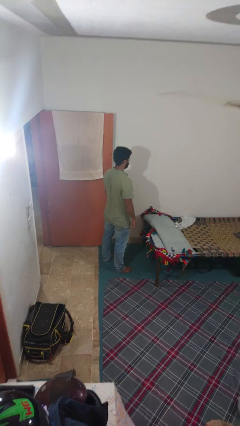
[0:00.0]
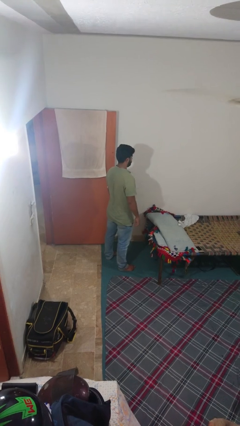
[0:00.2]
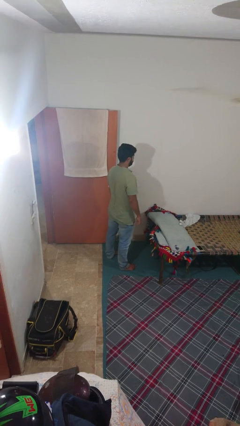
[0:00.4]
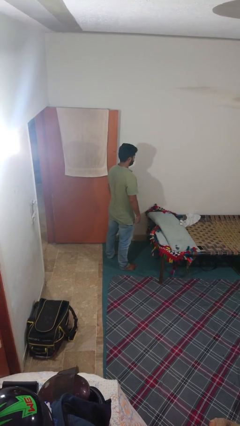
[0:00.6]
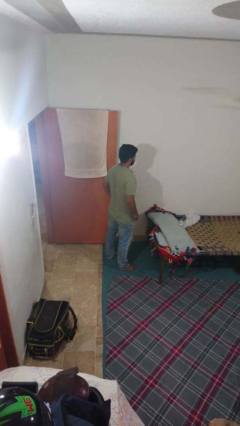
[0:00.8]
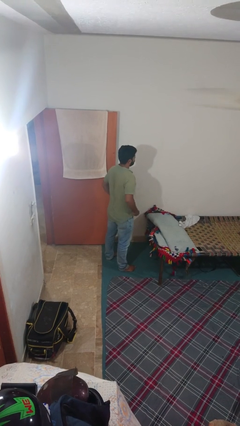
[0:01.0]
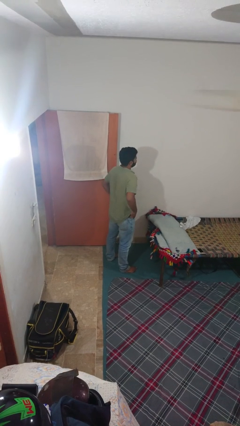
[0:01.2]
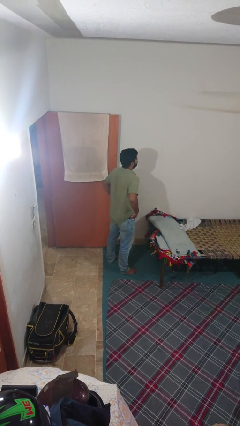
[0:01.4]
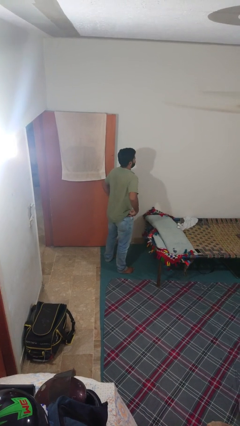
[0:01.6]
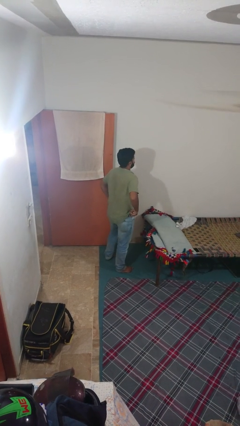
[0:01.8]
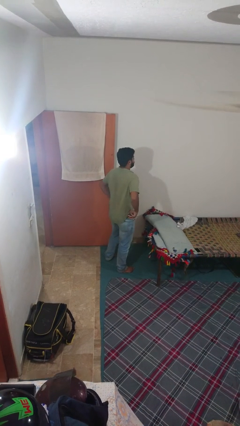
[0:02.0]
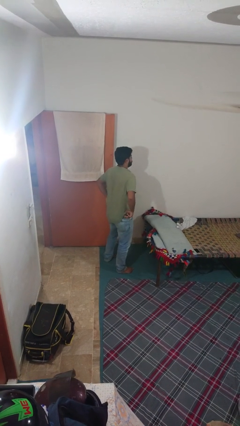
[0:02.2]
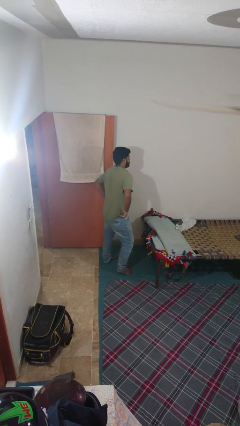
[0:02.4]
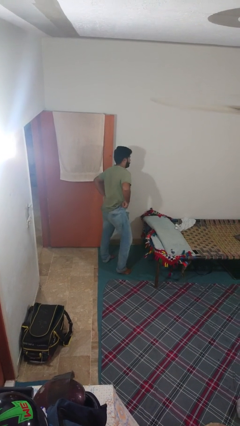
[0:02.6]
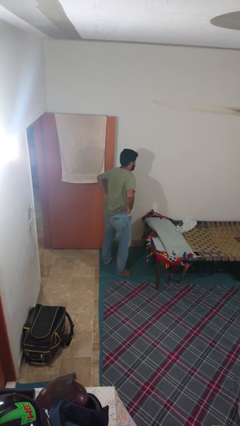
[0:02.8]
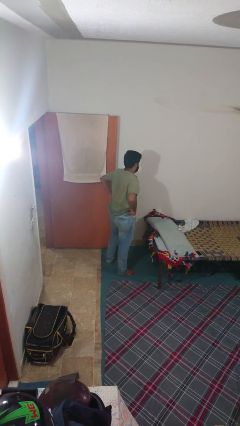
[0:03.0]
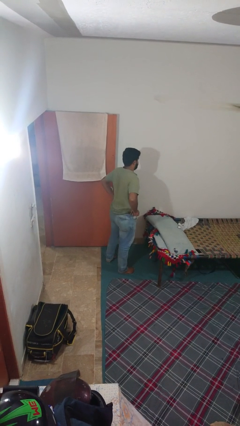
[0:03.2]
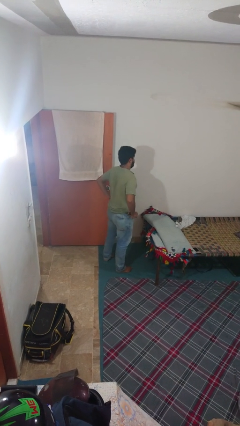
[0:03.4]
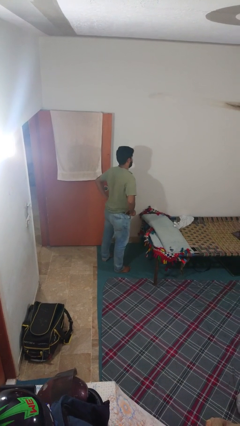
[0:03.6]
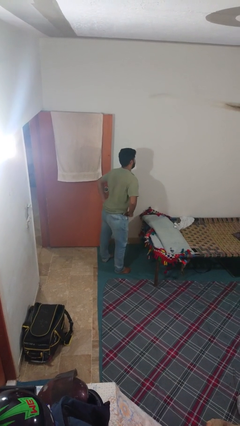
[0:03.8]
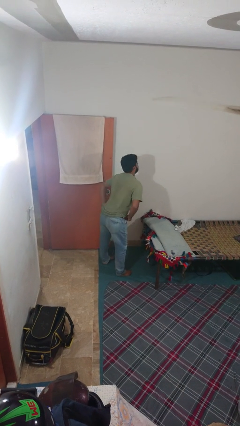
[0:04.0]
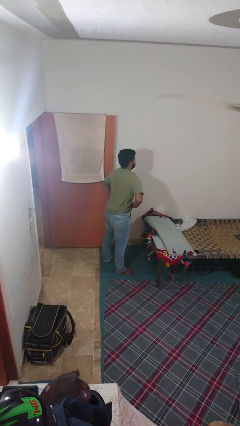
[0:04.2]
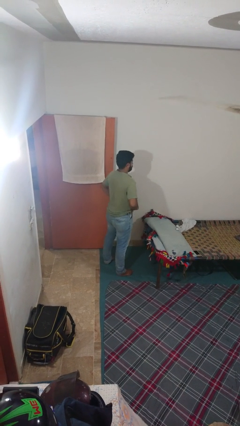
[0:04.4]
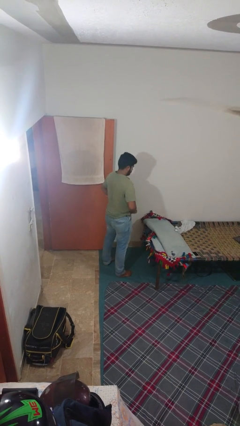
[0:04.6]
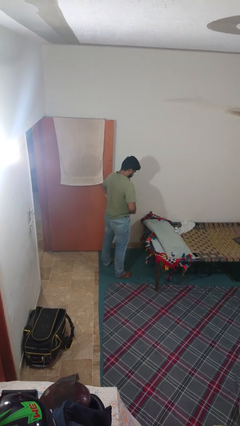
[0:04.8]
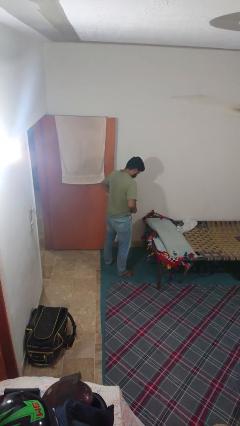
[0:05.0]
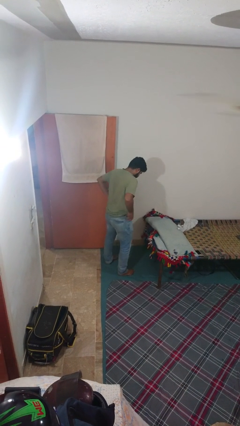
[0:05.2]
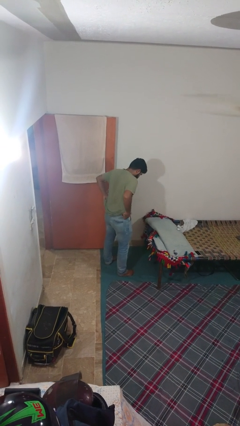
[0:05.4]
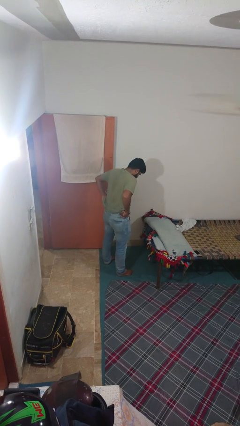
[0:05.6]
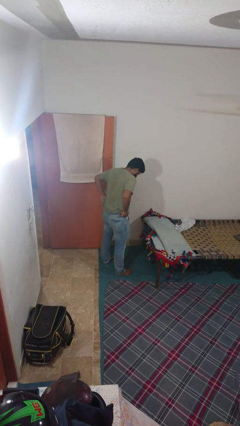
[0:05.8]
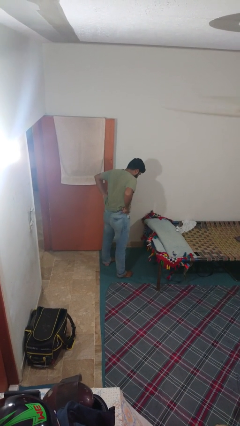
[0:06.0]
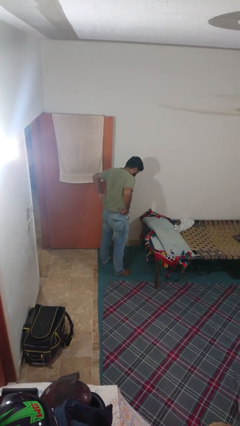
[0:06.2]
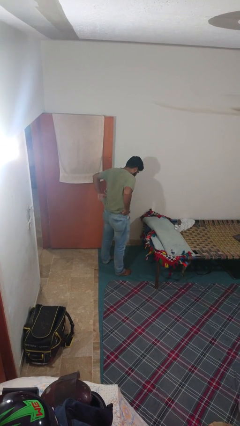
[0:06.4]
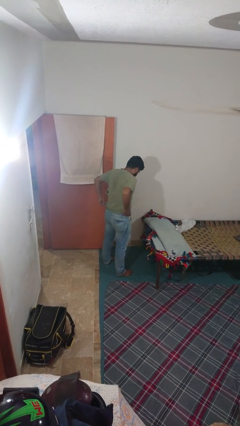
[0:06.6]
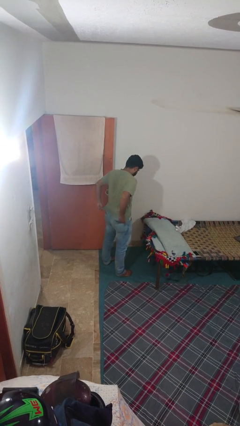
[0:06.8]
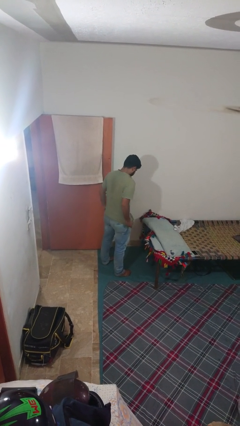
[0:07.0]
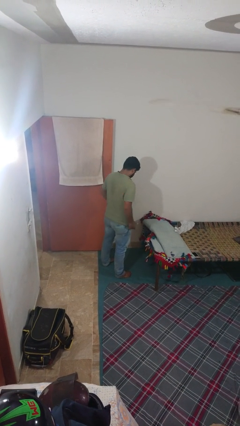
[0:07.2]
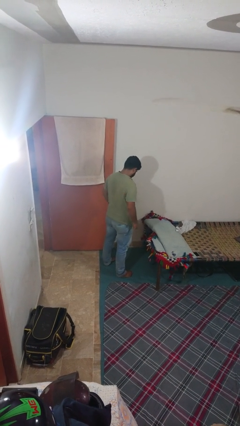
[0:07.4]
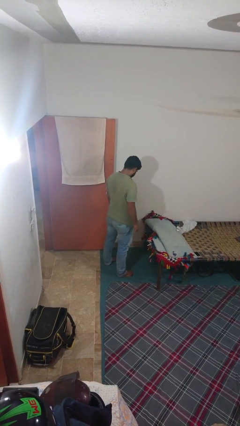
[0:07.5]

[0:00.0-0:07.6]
person hikes up pants

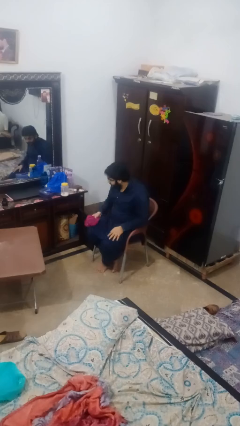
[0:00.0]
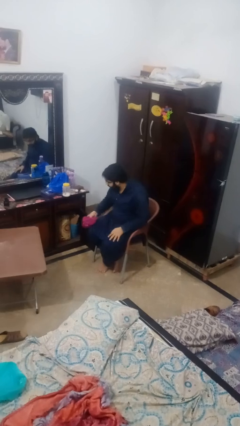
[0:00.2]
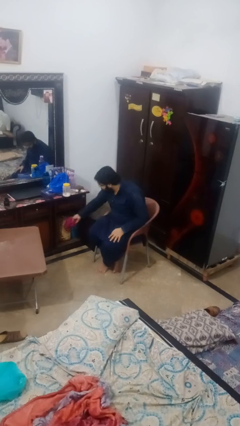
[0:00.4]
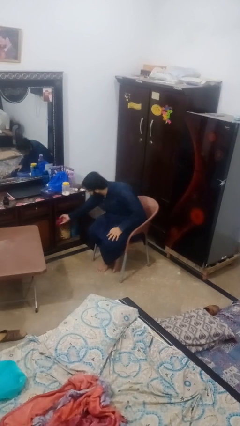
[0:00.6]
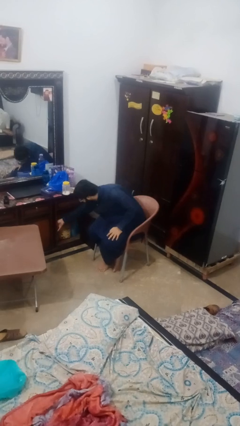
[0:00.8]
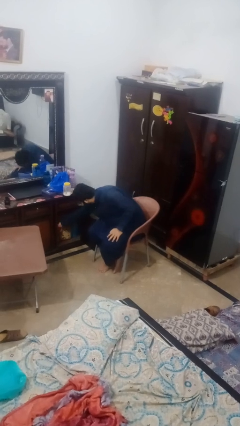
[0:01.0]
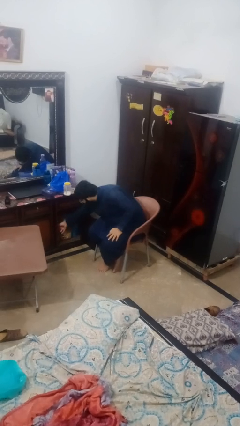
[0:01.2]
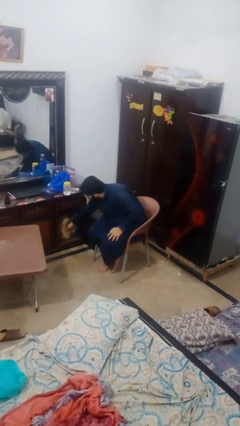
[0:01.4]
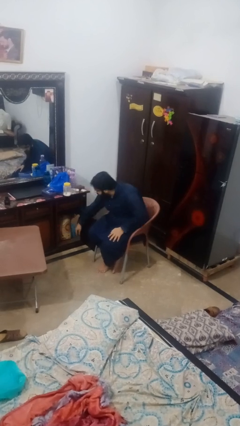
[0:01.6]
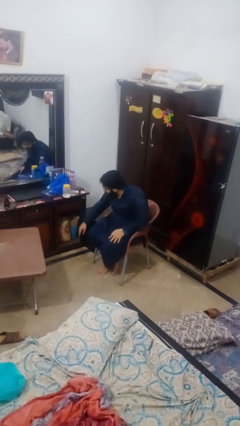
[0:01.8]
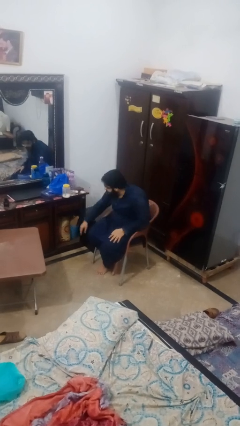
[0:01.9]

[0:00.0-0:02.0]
person puts clothes into dresser

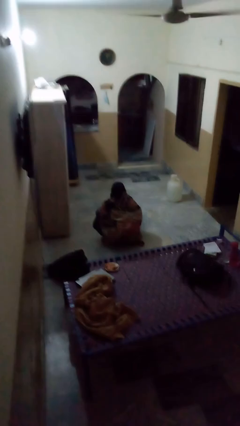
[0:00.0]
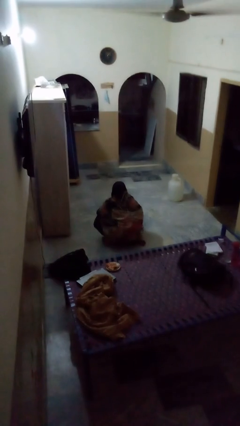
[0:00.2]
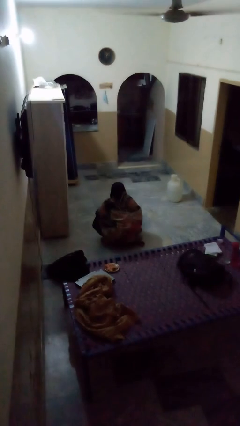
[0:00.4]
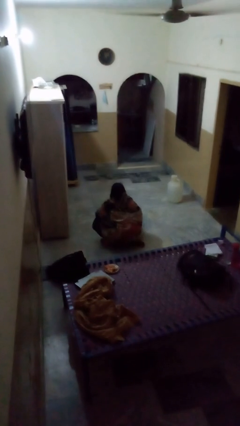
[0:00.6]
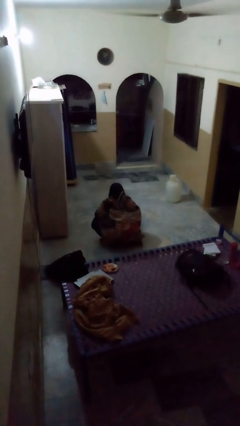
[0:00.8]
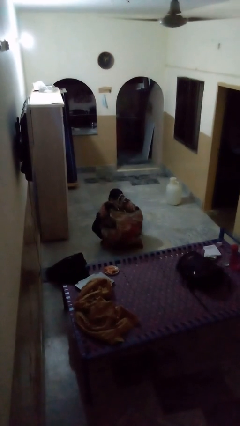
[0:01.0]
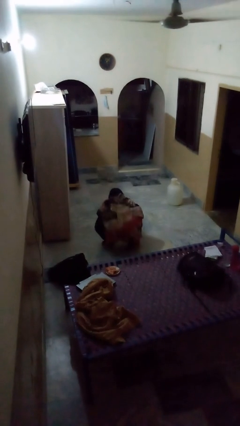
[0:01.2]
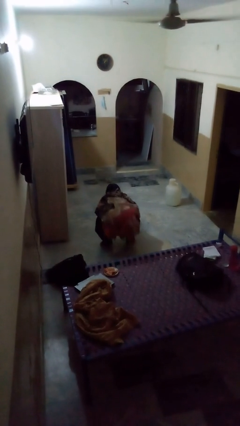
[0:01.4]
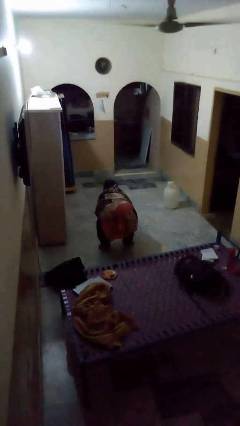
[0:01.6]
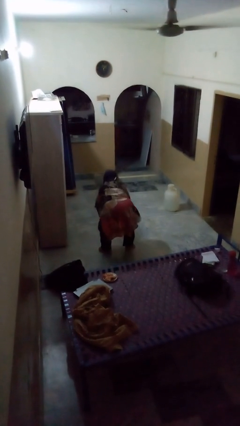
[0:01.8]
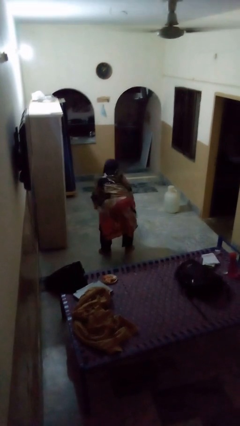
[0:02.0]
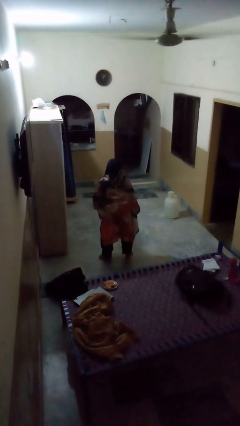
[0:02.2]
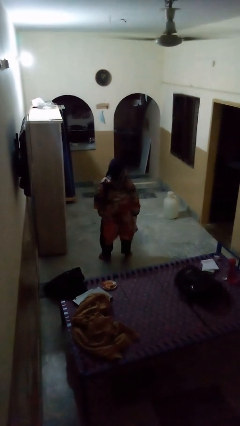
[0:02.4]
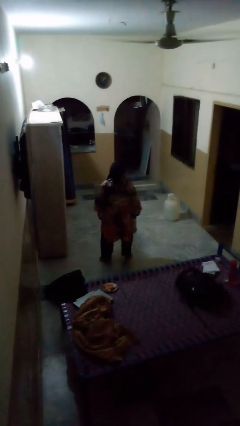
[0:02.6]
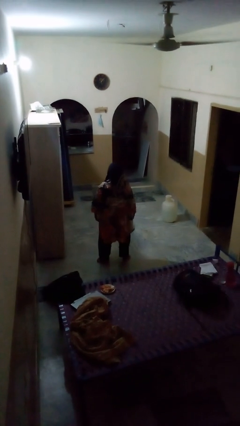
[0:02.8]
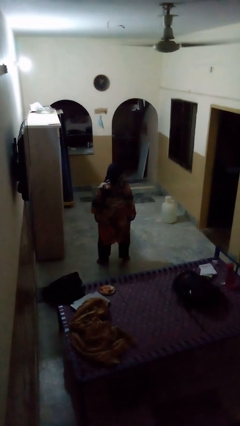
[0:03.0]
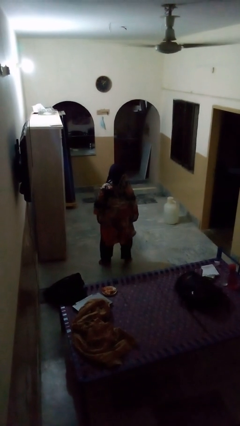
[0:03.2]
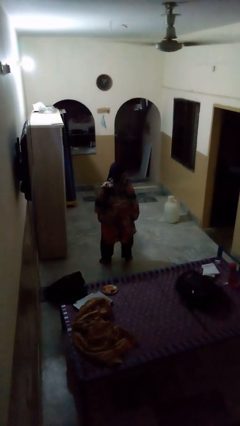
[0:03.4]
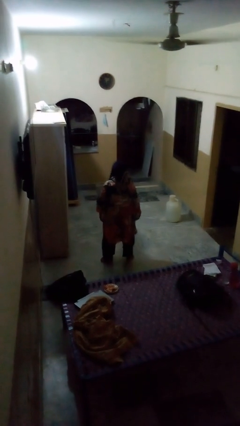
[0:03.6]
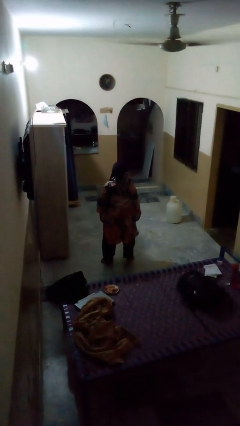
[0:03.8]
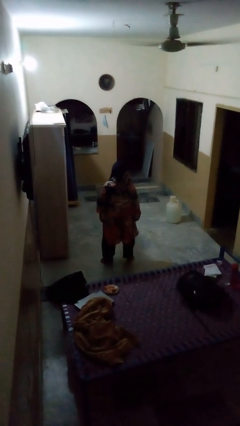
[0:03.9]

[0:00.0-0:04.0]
person stands up

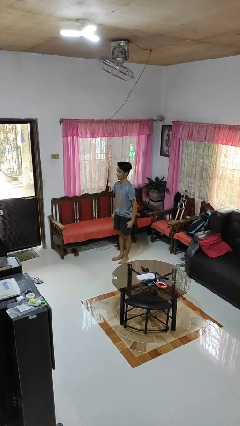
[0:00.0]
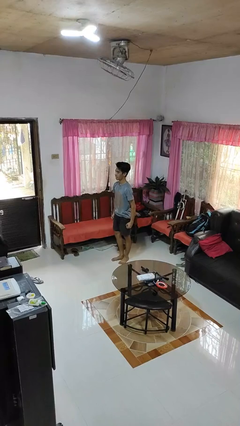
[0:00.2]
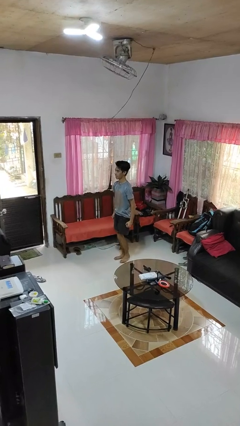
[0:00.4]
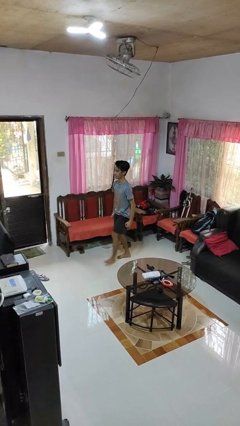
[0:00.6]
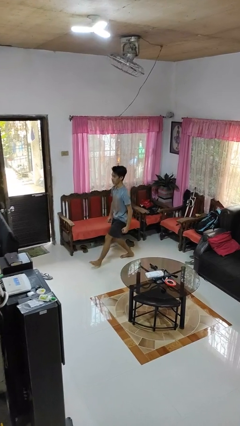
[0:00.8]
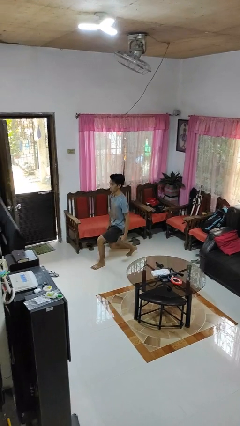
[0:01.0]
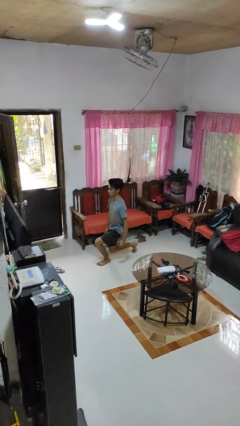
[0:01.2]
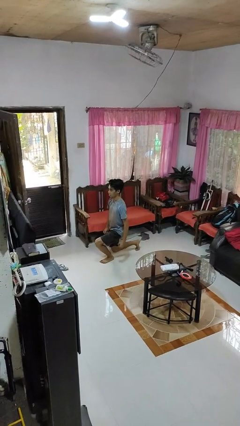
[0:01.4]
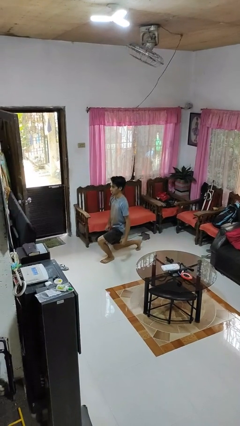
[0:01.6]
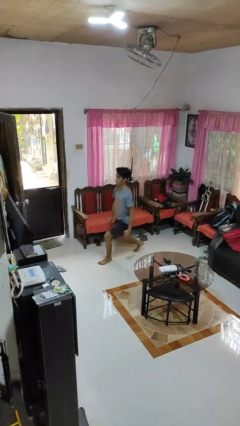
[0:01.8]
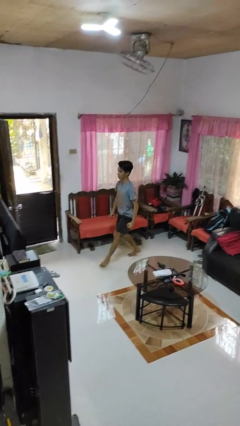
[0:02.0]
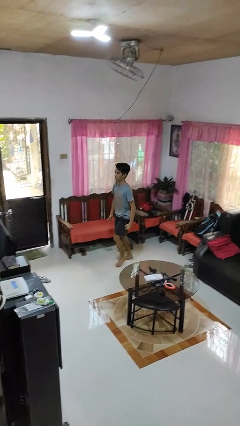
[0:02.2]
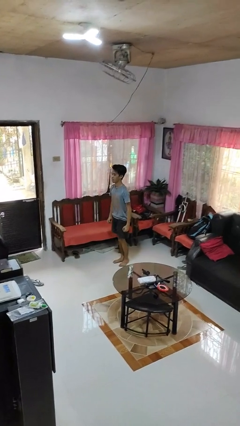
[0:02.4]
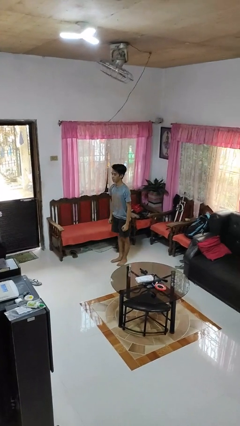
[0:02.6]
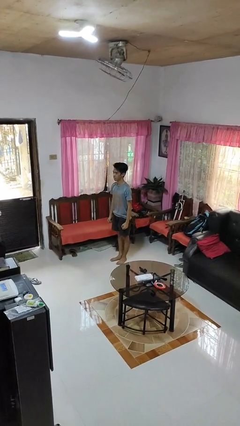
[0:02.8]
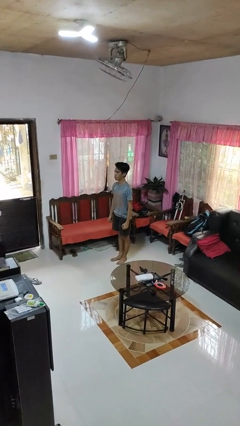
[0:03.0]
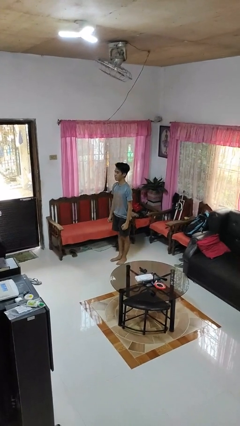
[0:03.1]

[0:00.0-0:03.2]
person exercises with lunges

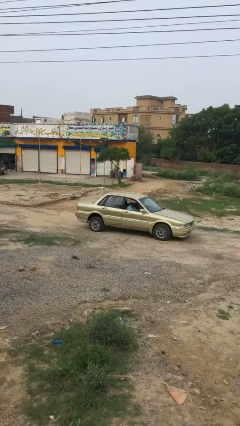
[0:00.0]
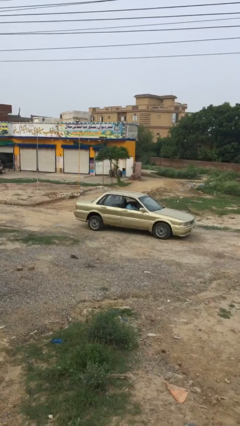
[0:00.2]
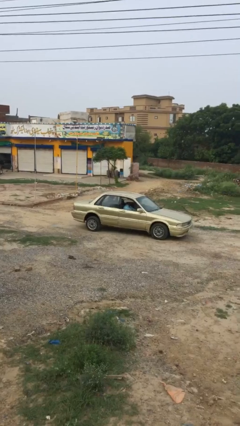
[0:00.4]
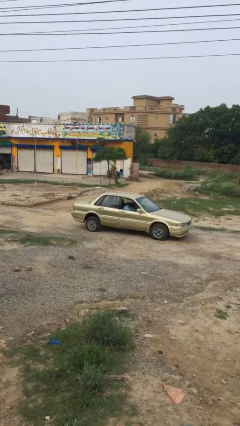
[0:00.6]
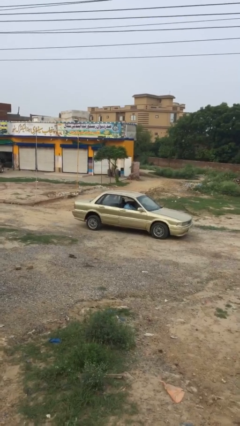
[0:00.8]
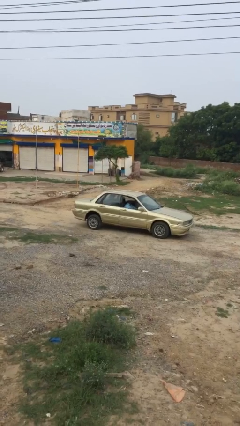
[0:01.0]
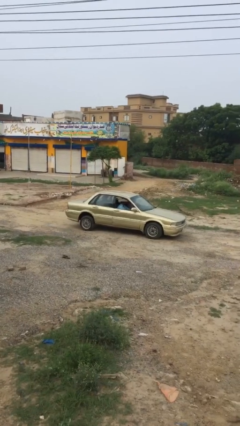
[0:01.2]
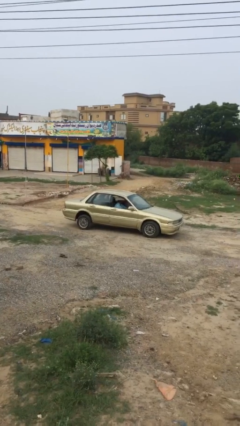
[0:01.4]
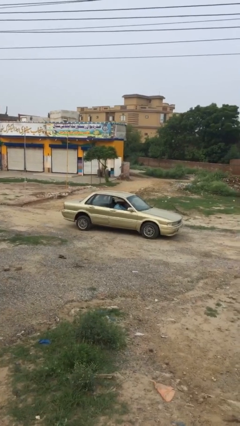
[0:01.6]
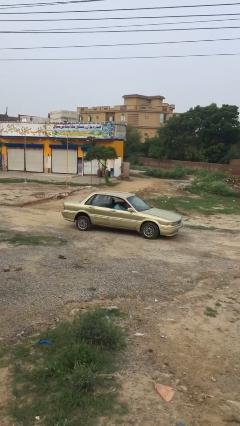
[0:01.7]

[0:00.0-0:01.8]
car drops off person
